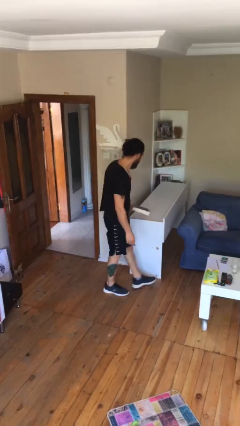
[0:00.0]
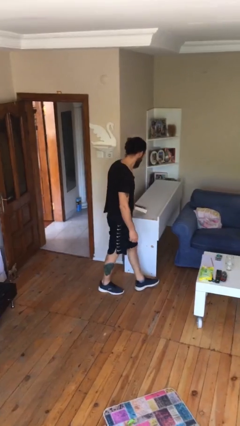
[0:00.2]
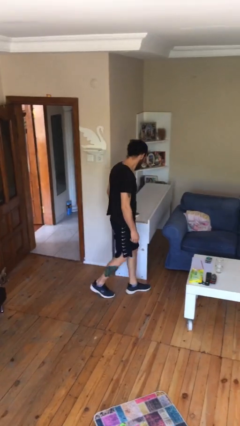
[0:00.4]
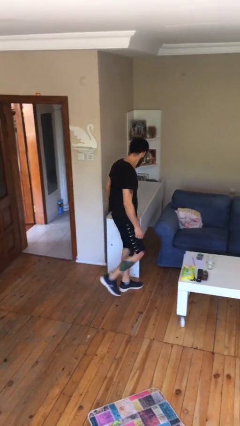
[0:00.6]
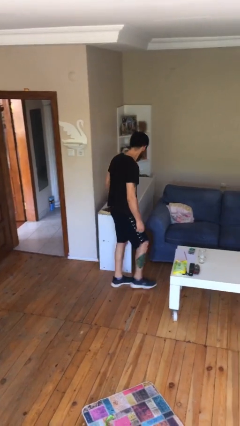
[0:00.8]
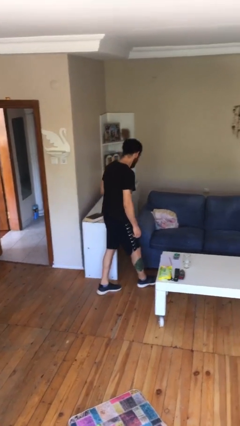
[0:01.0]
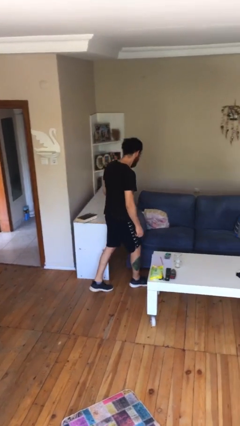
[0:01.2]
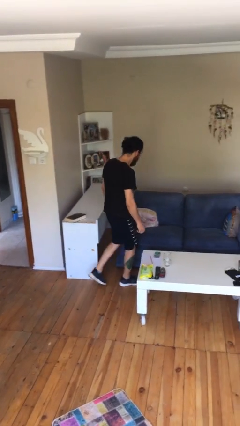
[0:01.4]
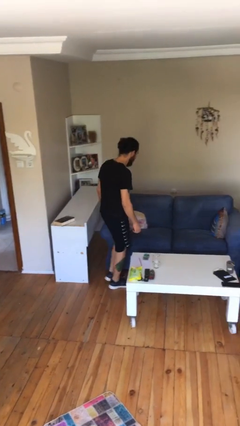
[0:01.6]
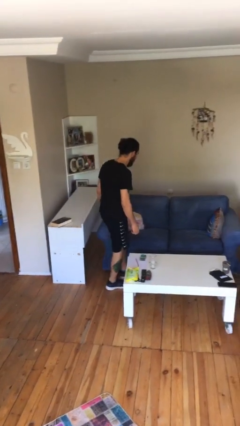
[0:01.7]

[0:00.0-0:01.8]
person puts down object on table

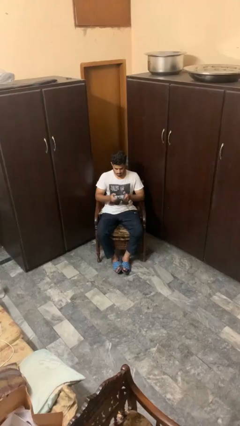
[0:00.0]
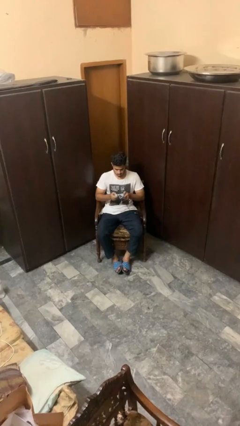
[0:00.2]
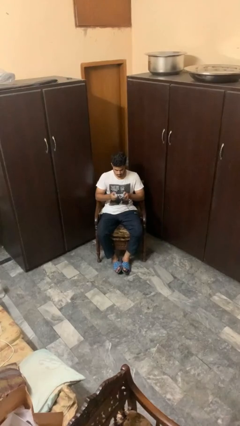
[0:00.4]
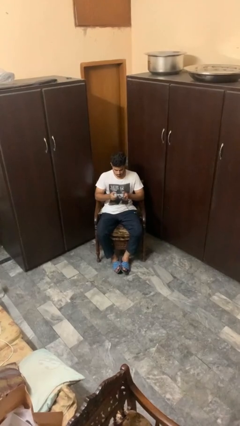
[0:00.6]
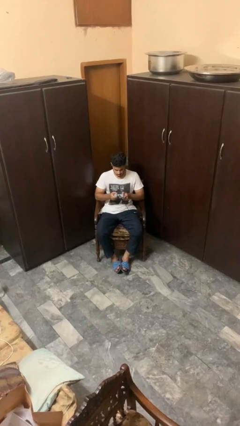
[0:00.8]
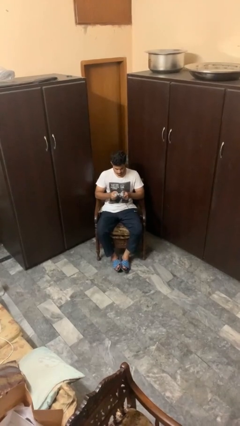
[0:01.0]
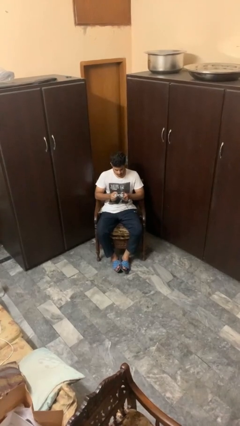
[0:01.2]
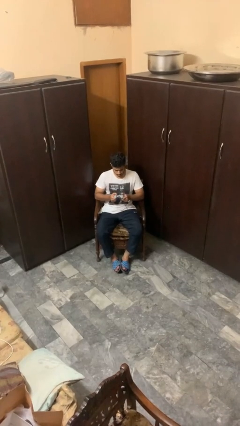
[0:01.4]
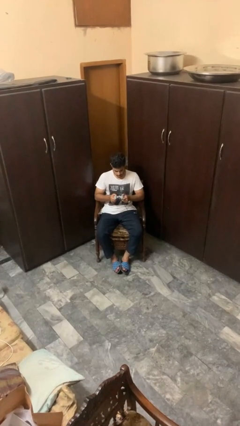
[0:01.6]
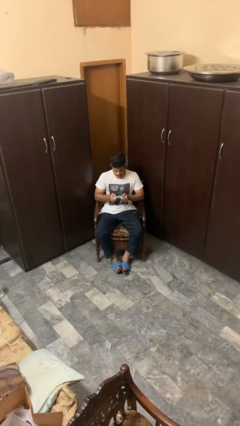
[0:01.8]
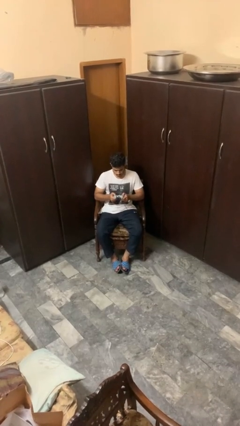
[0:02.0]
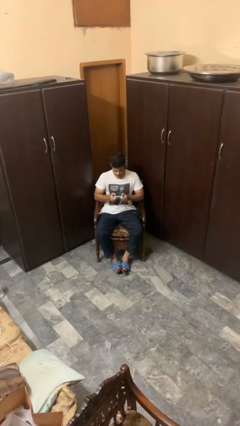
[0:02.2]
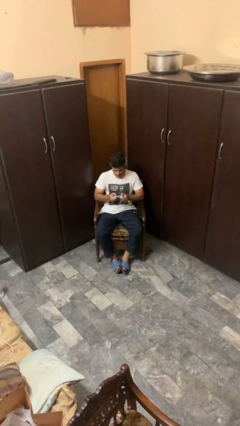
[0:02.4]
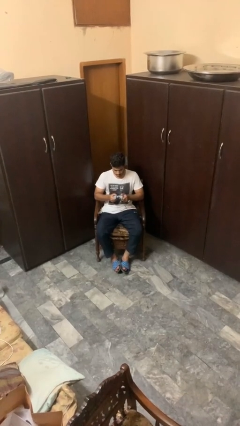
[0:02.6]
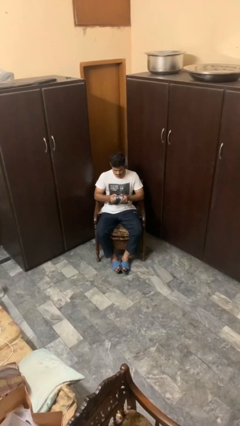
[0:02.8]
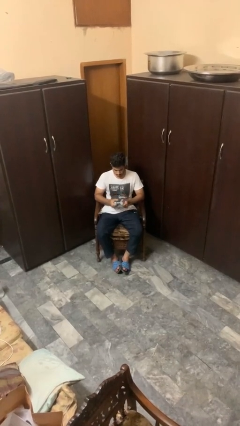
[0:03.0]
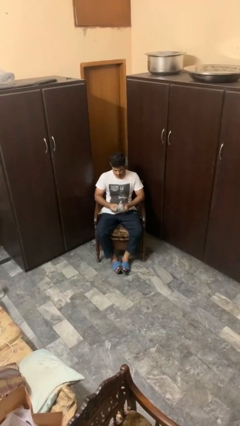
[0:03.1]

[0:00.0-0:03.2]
person interacts with handheld game

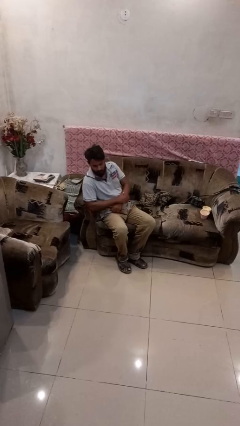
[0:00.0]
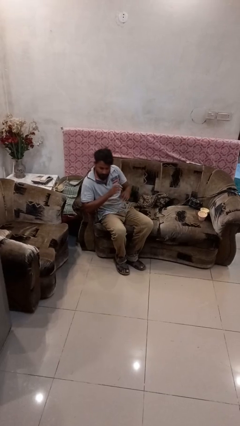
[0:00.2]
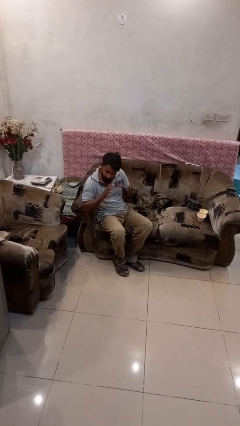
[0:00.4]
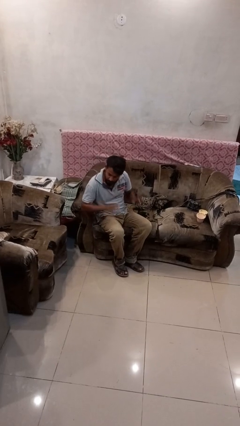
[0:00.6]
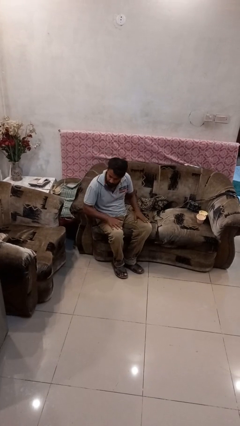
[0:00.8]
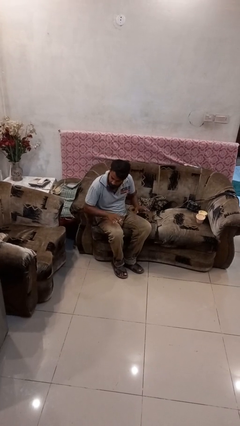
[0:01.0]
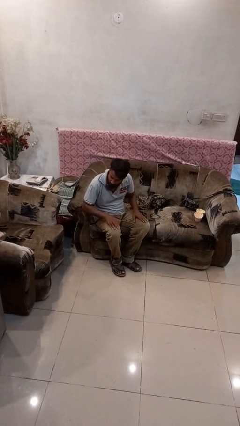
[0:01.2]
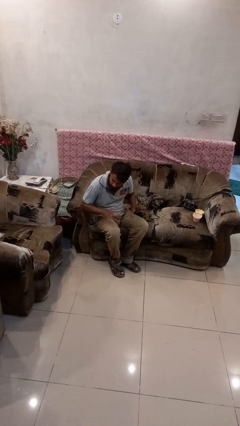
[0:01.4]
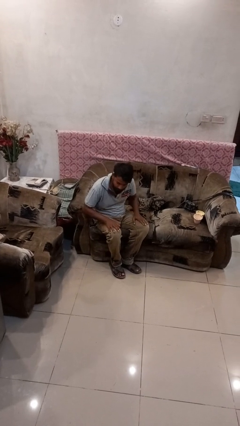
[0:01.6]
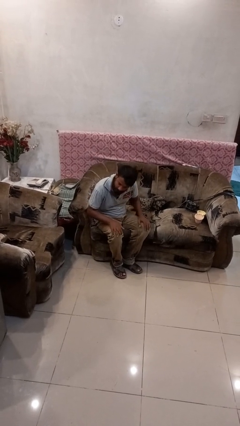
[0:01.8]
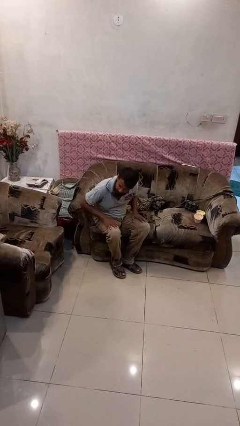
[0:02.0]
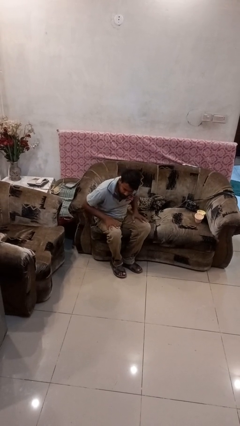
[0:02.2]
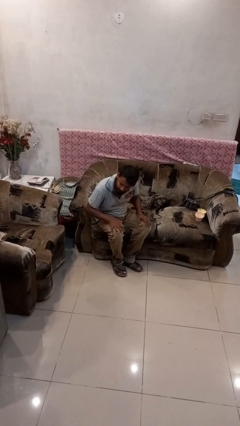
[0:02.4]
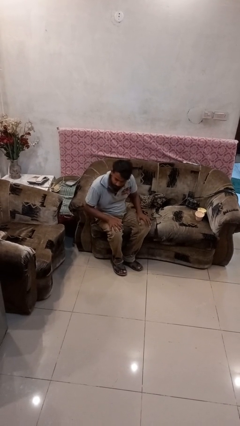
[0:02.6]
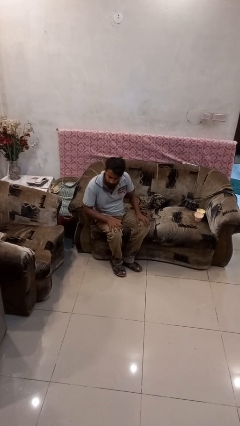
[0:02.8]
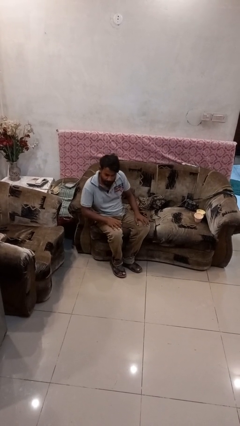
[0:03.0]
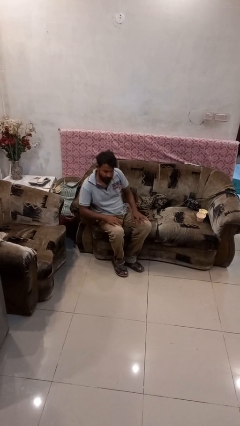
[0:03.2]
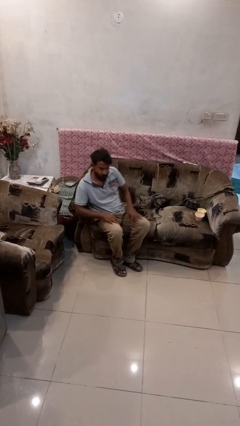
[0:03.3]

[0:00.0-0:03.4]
person slaps hands on thighs

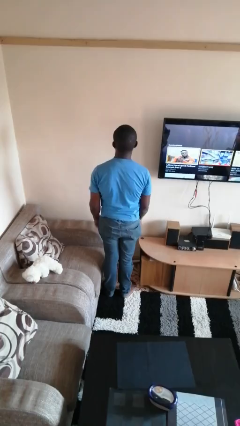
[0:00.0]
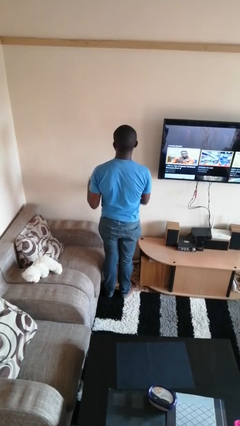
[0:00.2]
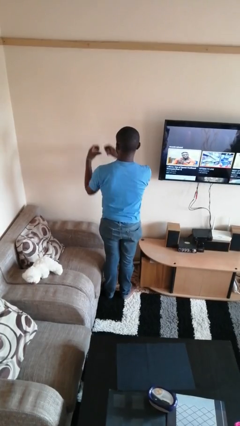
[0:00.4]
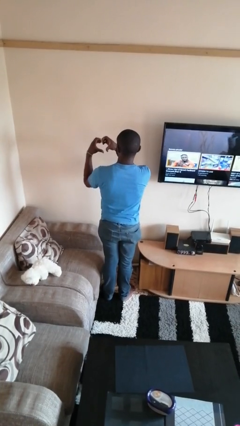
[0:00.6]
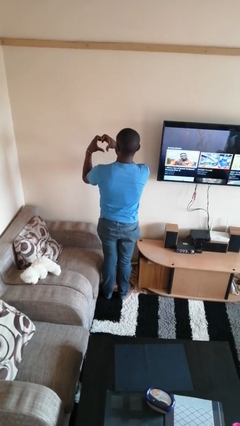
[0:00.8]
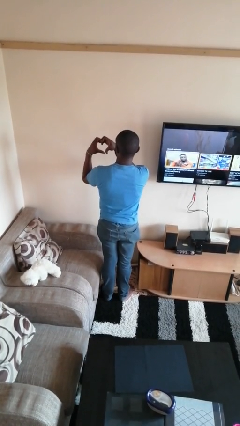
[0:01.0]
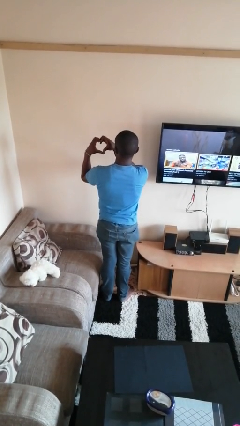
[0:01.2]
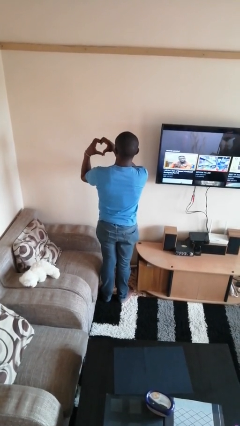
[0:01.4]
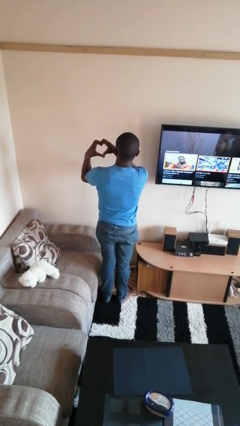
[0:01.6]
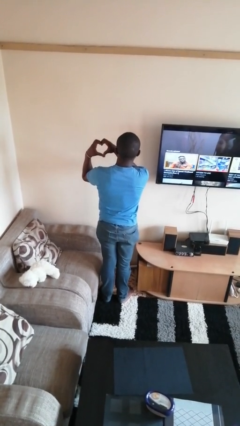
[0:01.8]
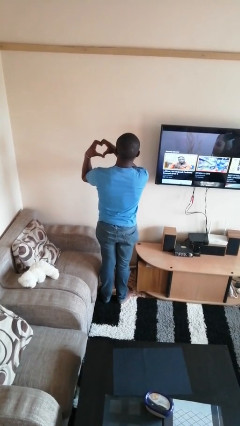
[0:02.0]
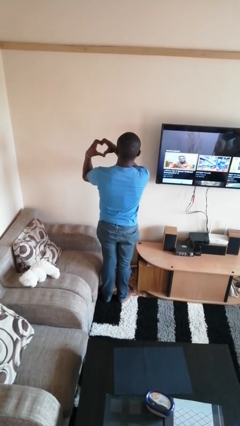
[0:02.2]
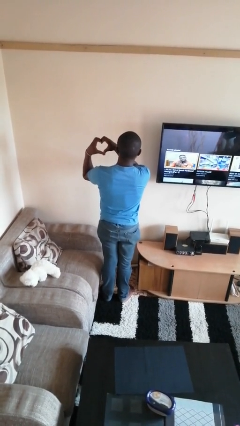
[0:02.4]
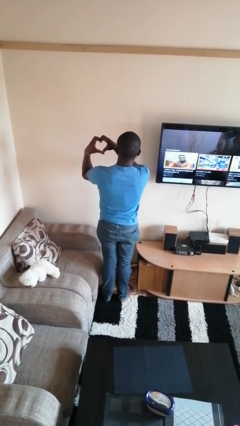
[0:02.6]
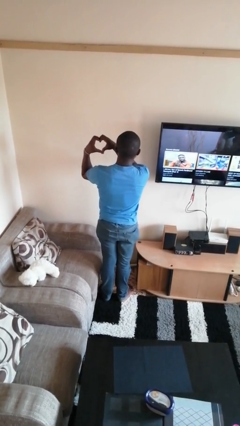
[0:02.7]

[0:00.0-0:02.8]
person gestures heart

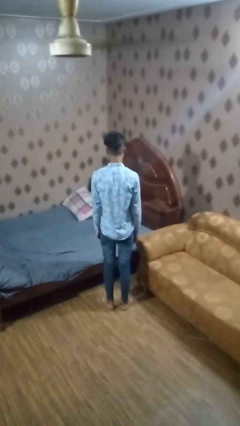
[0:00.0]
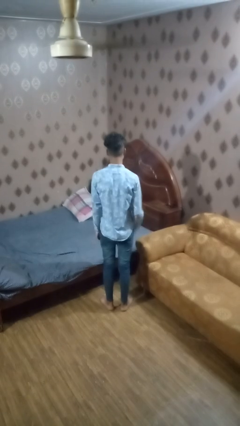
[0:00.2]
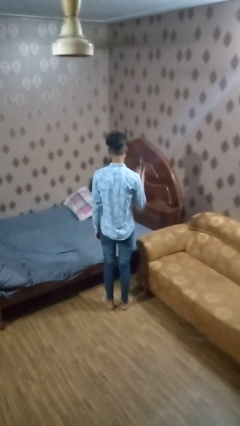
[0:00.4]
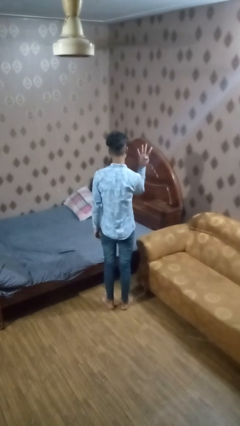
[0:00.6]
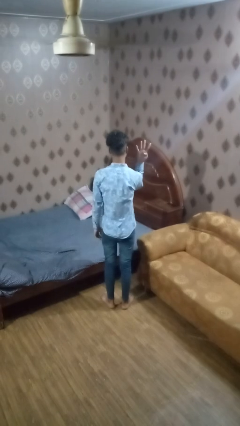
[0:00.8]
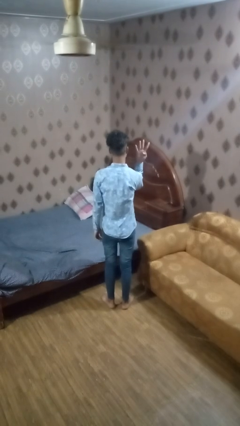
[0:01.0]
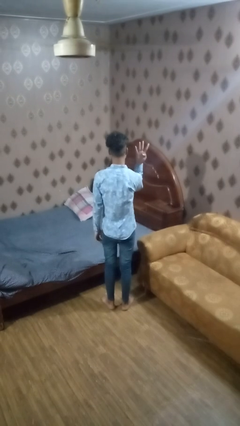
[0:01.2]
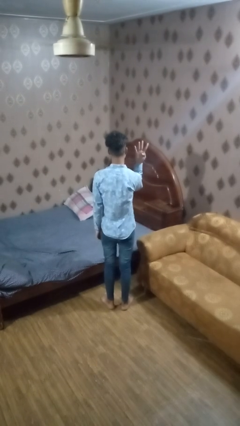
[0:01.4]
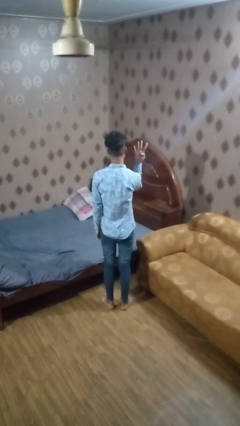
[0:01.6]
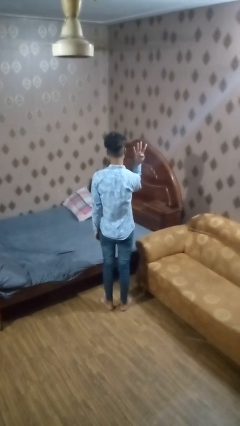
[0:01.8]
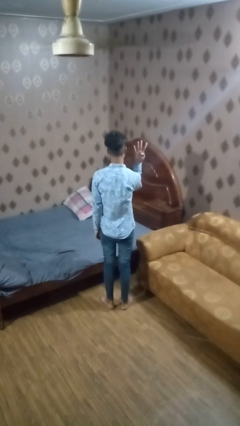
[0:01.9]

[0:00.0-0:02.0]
person gestures number four

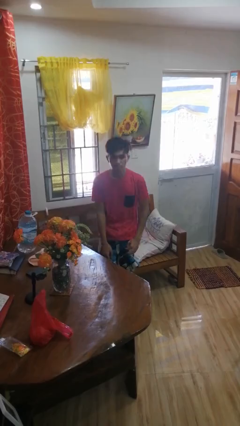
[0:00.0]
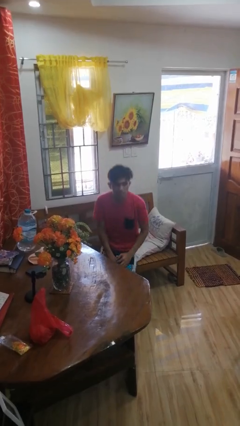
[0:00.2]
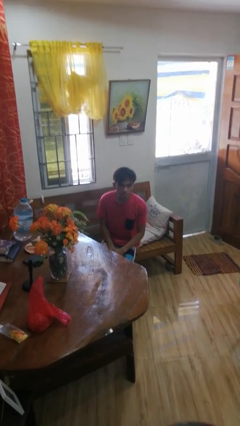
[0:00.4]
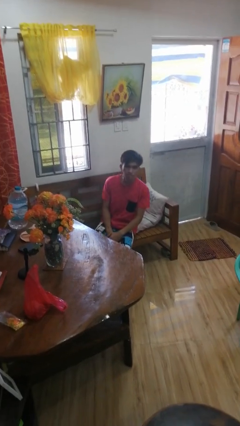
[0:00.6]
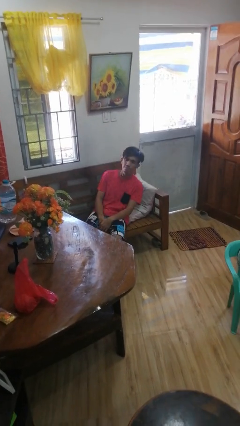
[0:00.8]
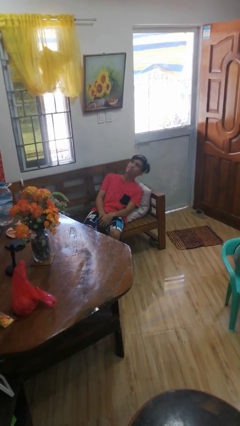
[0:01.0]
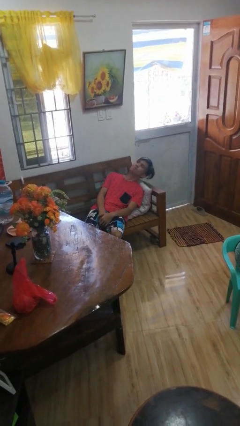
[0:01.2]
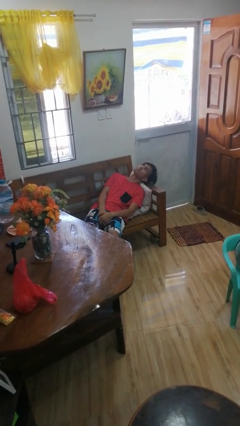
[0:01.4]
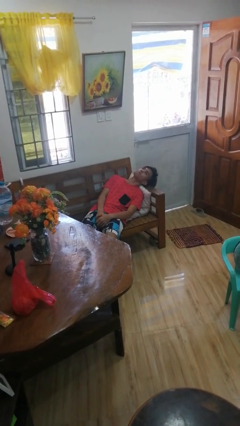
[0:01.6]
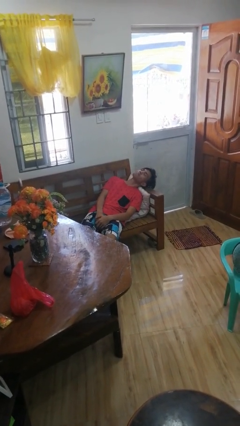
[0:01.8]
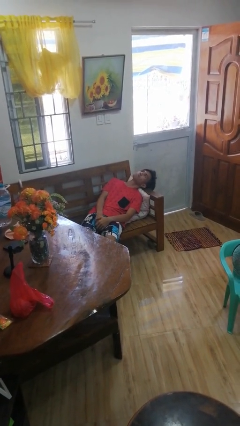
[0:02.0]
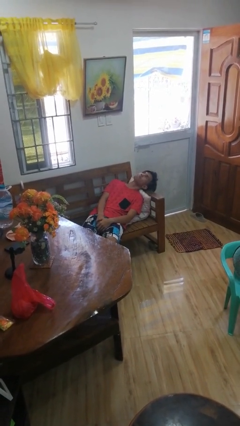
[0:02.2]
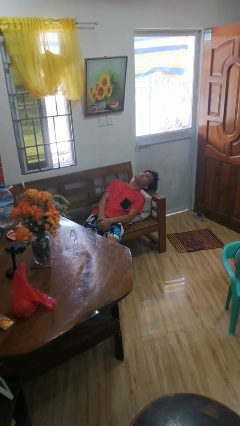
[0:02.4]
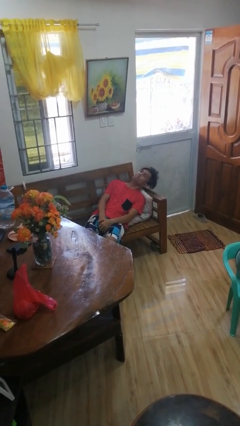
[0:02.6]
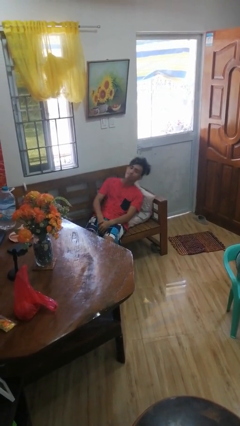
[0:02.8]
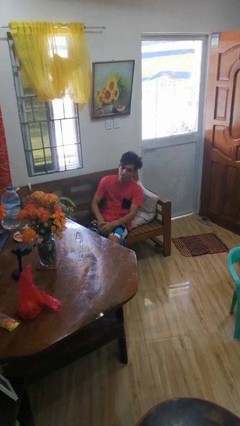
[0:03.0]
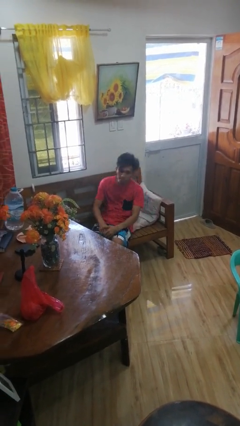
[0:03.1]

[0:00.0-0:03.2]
person lies down on couch

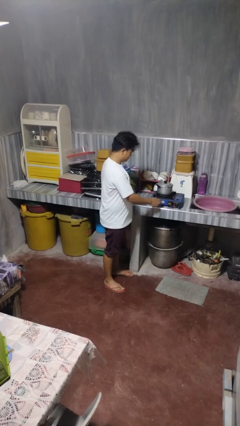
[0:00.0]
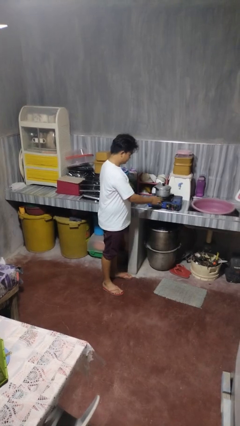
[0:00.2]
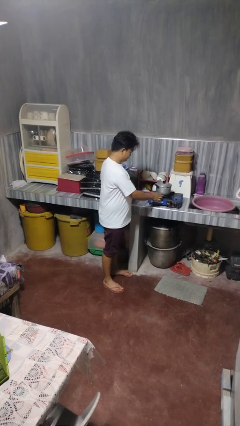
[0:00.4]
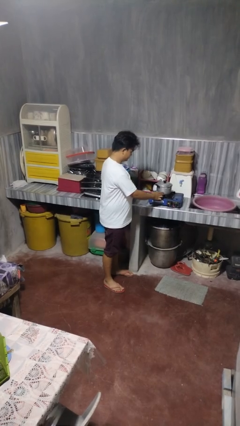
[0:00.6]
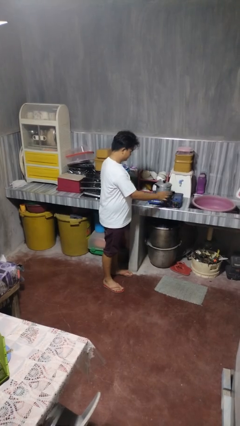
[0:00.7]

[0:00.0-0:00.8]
person burns hand
